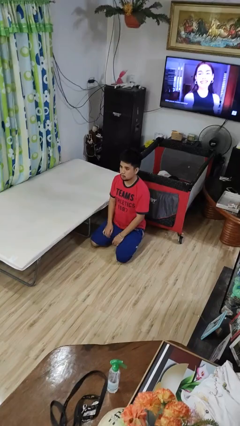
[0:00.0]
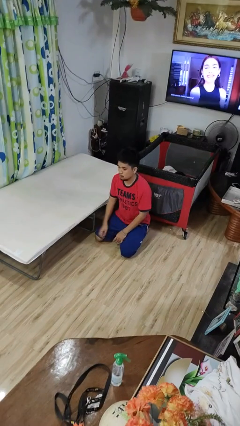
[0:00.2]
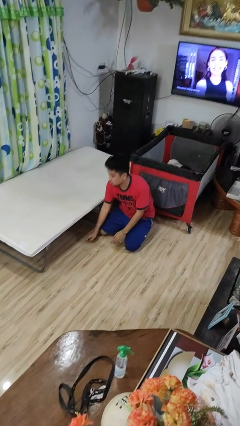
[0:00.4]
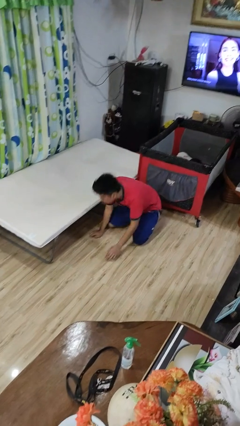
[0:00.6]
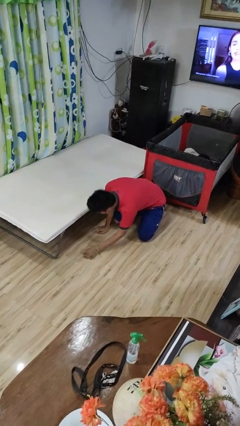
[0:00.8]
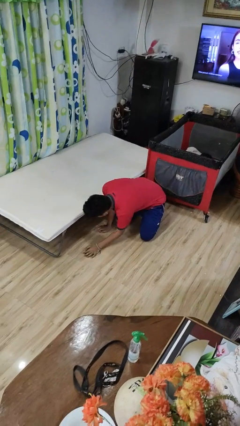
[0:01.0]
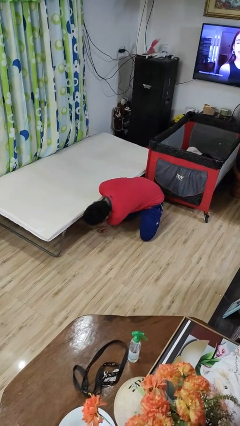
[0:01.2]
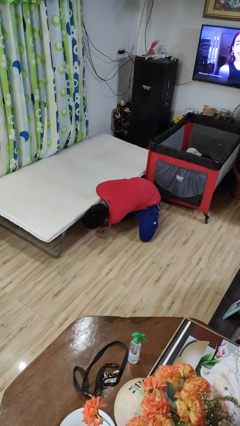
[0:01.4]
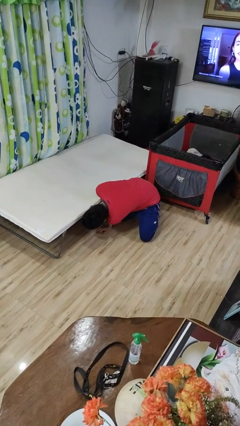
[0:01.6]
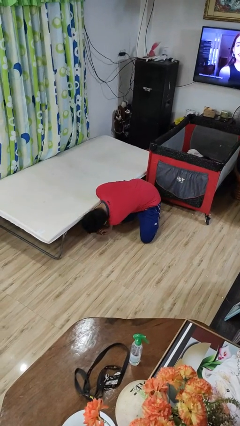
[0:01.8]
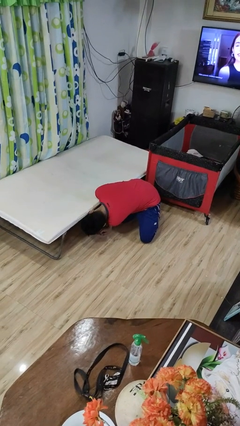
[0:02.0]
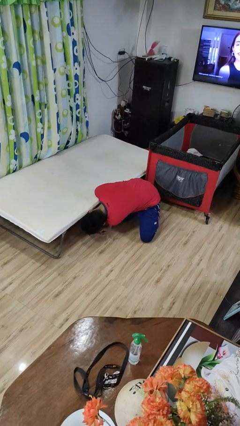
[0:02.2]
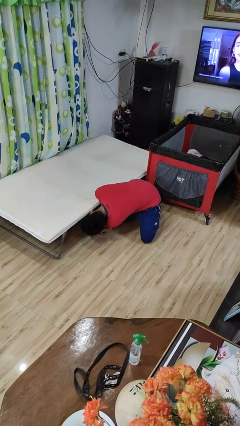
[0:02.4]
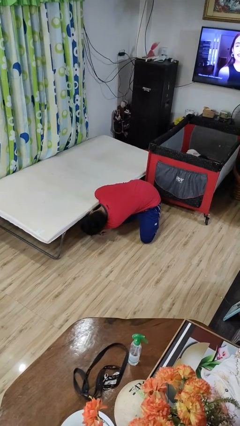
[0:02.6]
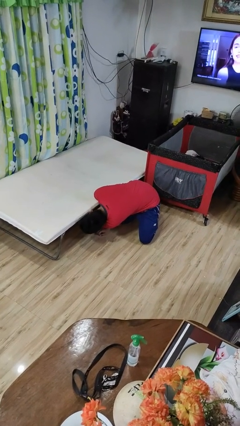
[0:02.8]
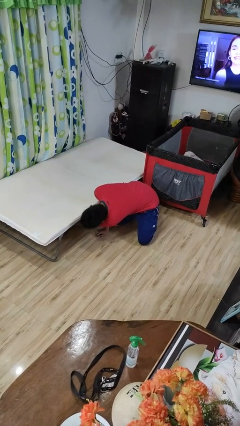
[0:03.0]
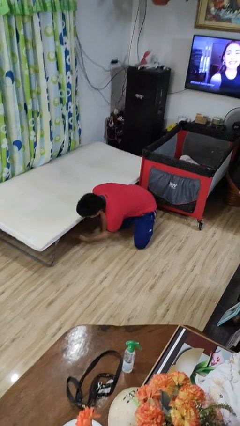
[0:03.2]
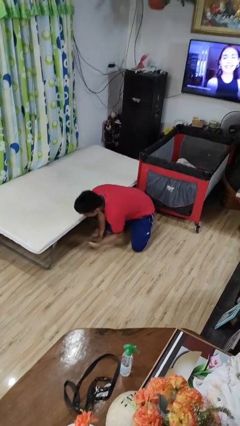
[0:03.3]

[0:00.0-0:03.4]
person searches under bed

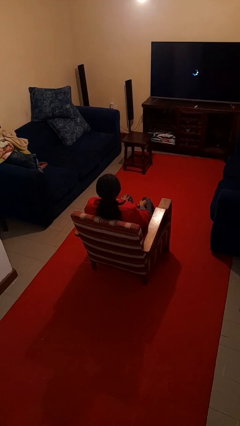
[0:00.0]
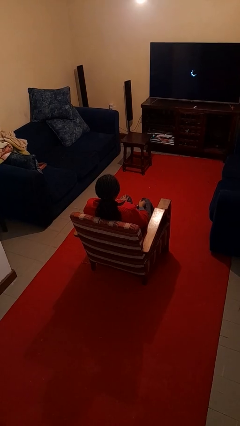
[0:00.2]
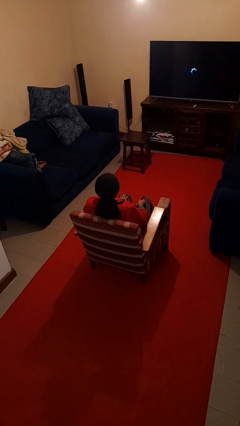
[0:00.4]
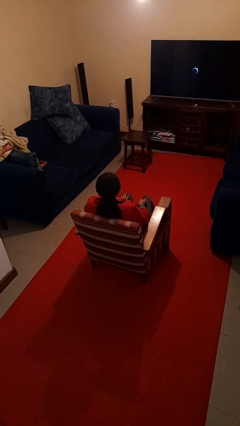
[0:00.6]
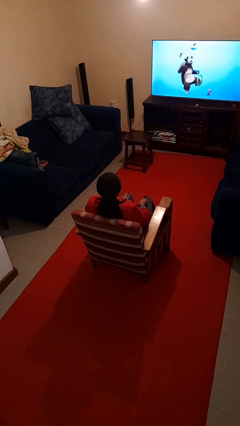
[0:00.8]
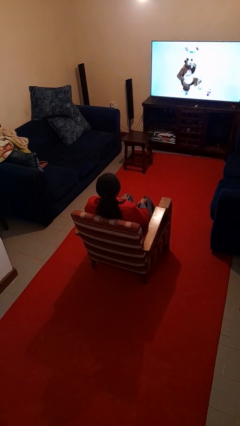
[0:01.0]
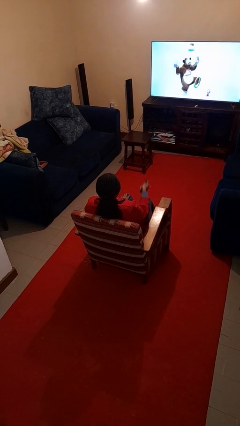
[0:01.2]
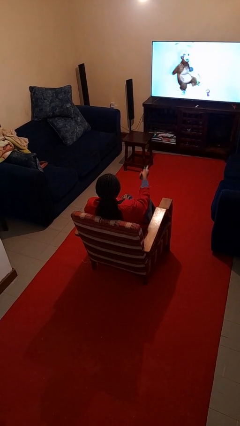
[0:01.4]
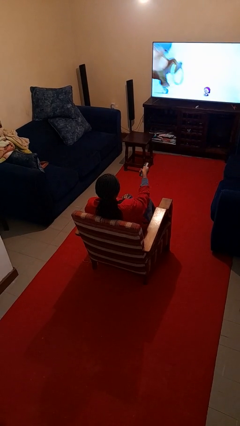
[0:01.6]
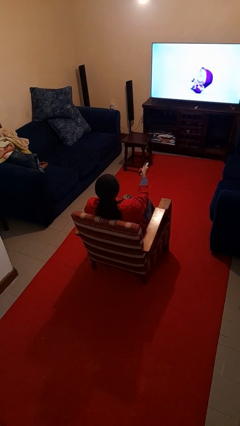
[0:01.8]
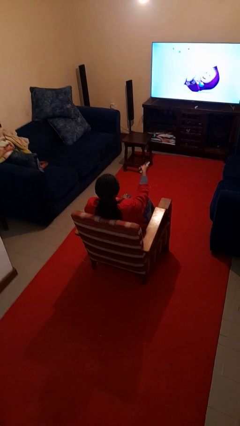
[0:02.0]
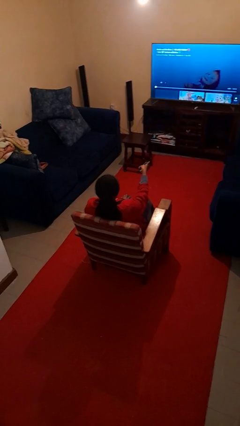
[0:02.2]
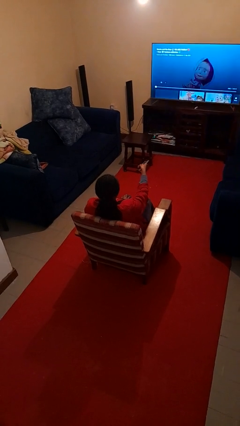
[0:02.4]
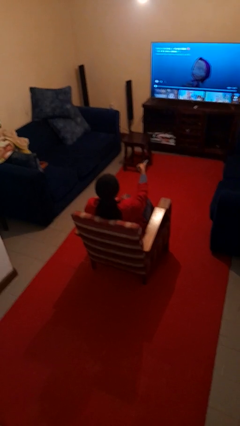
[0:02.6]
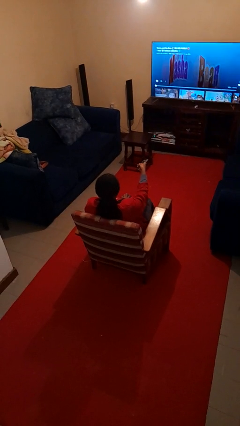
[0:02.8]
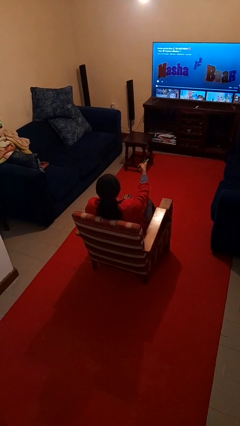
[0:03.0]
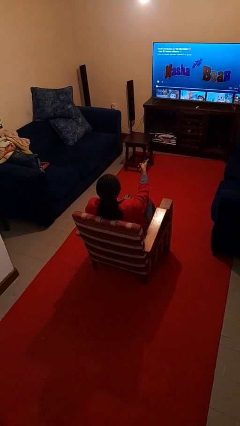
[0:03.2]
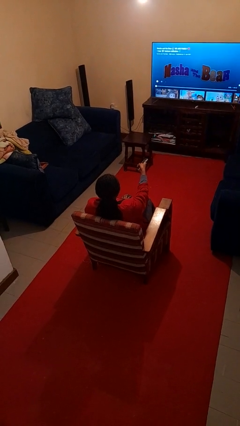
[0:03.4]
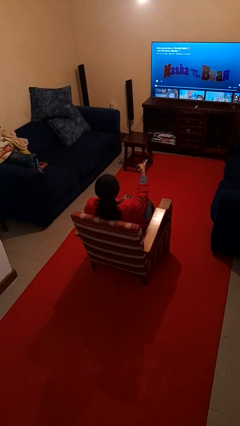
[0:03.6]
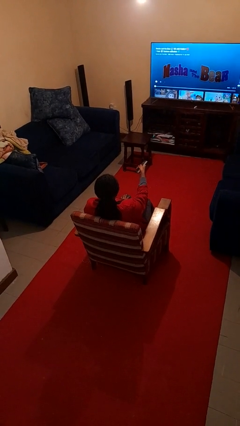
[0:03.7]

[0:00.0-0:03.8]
person uses television remote

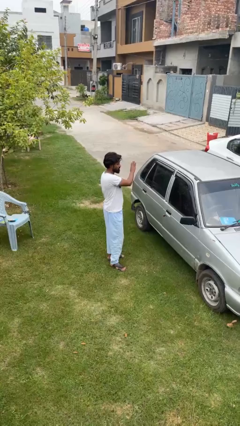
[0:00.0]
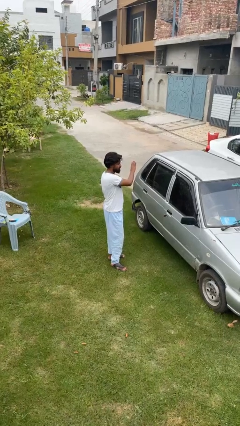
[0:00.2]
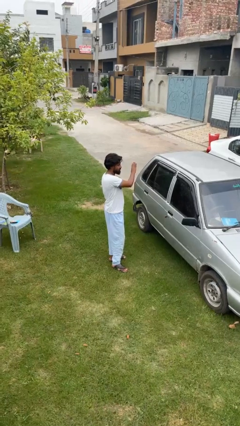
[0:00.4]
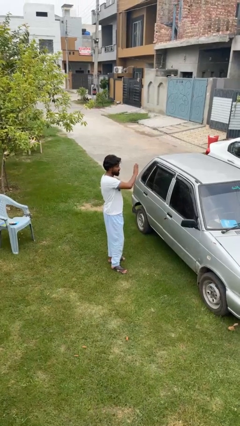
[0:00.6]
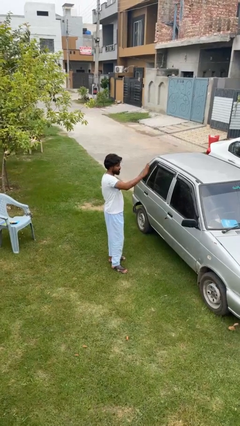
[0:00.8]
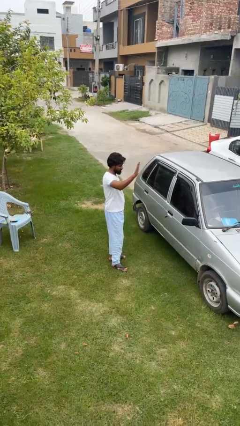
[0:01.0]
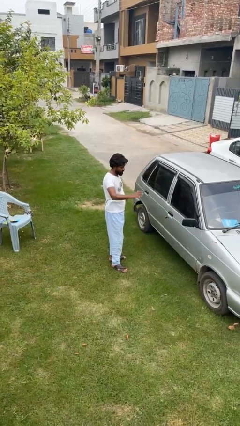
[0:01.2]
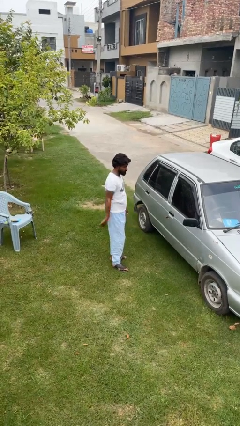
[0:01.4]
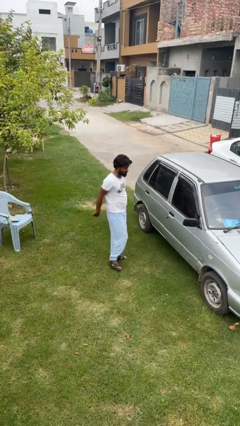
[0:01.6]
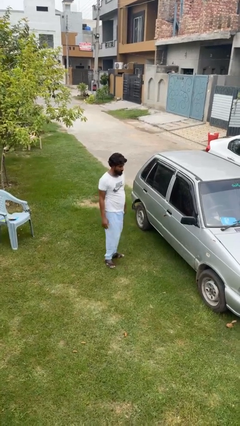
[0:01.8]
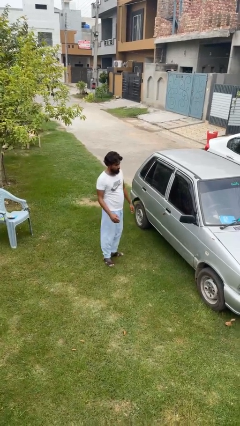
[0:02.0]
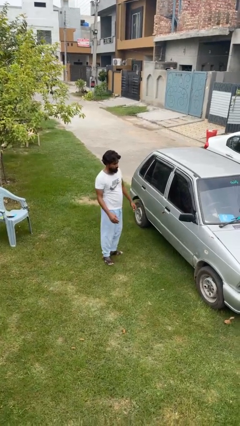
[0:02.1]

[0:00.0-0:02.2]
person gestures swipe right

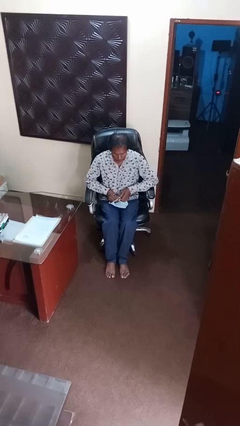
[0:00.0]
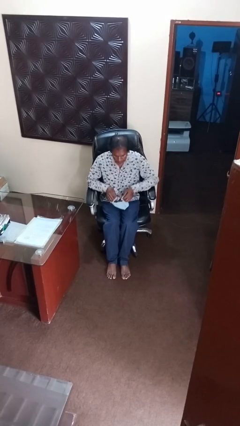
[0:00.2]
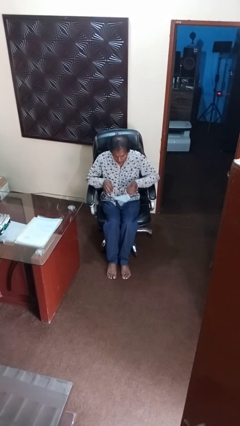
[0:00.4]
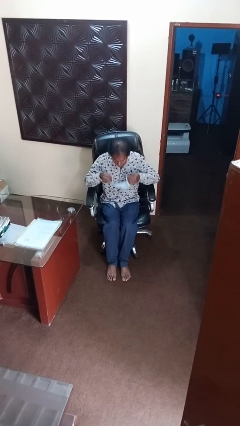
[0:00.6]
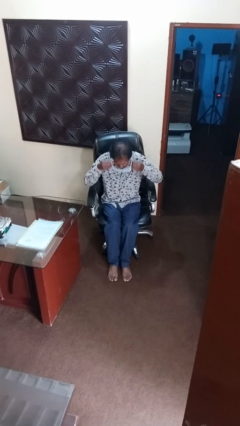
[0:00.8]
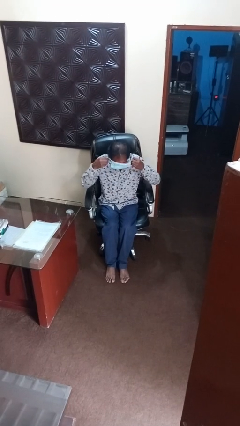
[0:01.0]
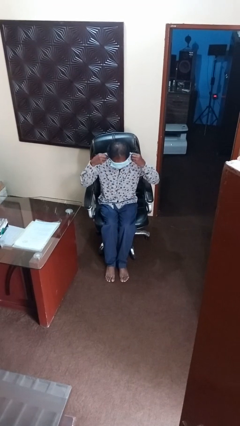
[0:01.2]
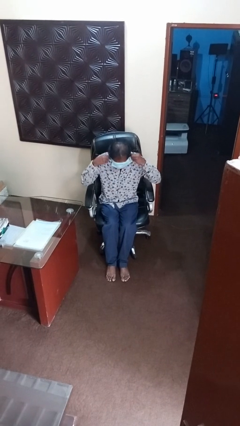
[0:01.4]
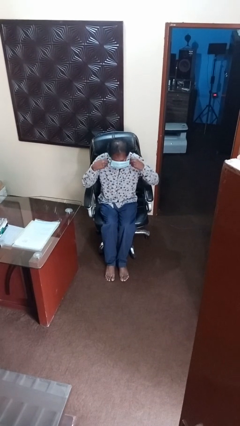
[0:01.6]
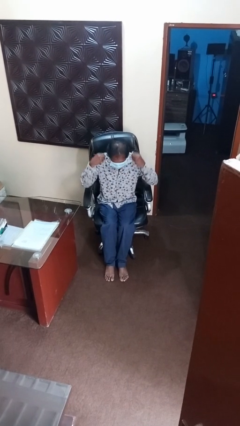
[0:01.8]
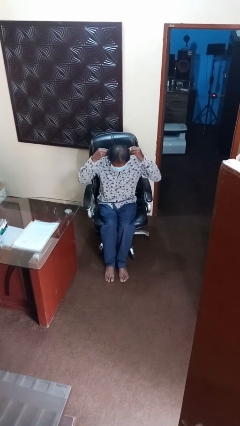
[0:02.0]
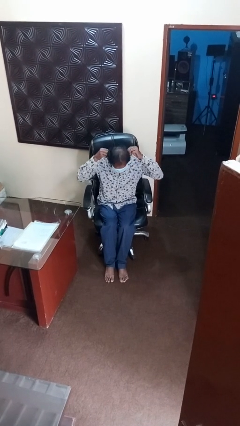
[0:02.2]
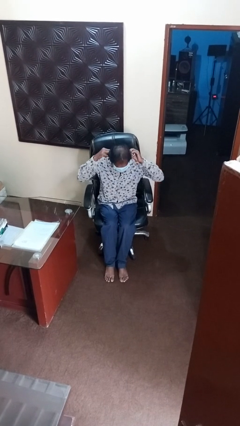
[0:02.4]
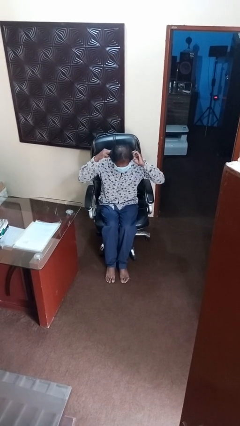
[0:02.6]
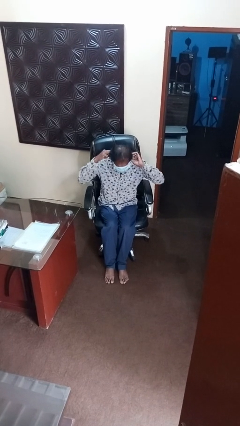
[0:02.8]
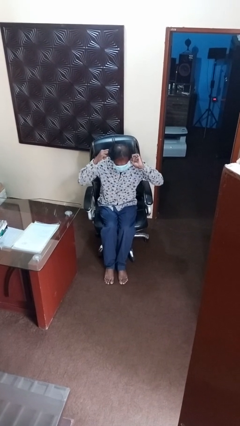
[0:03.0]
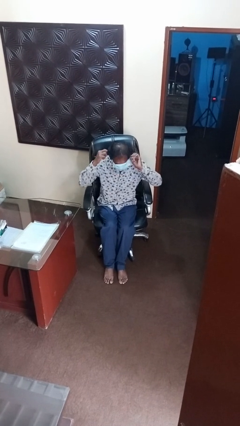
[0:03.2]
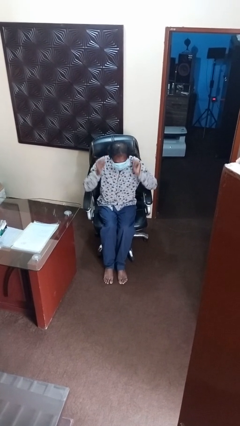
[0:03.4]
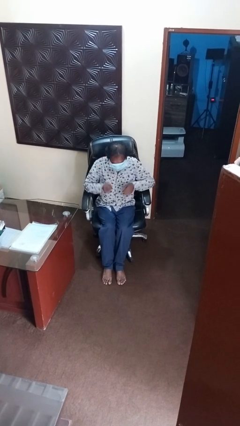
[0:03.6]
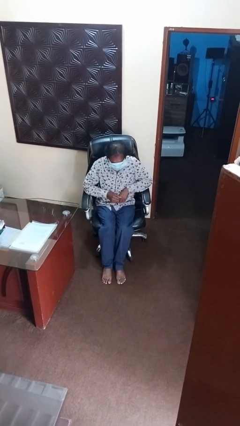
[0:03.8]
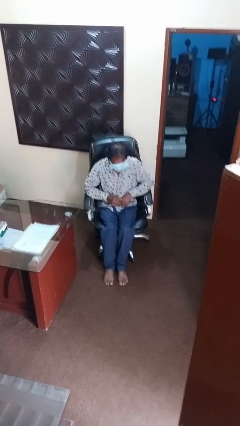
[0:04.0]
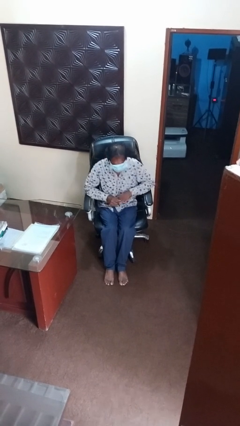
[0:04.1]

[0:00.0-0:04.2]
person puts on facemask

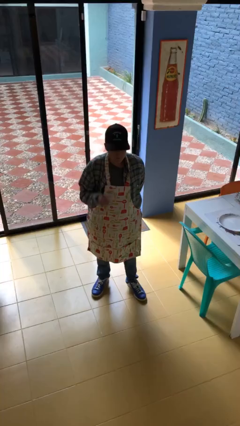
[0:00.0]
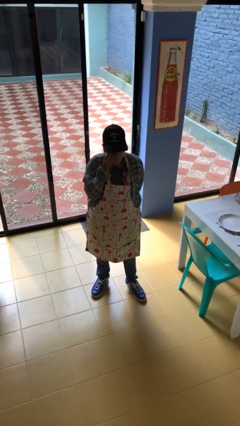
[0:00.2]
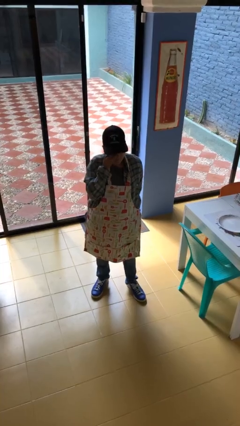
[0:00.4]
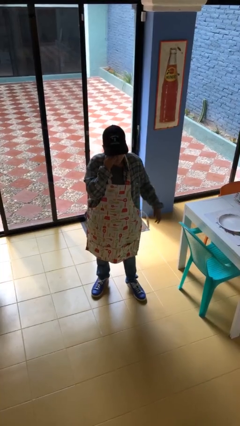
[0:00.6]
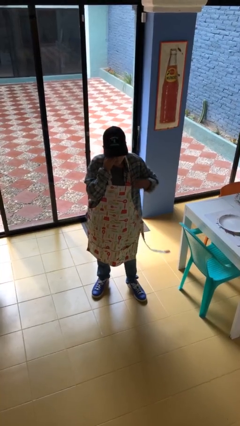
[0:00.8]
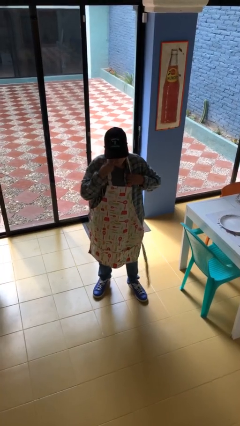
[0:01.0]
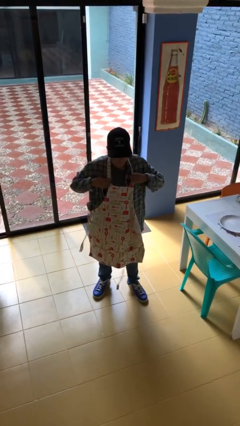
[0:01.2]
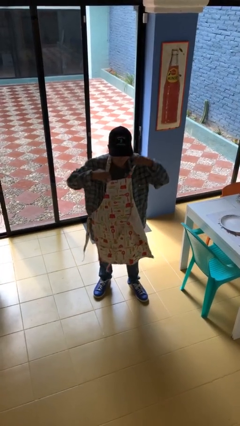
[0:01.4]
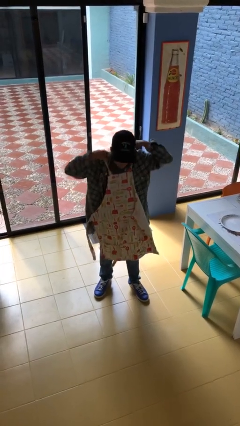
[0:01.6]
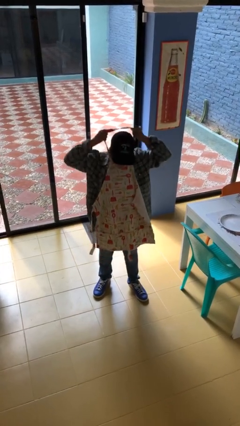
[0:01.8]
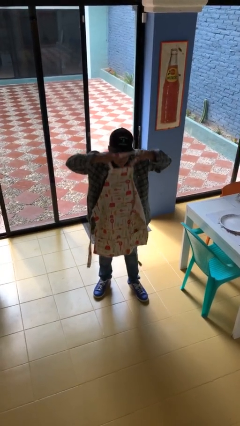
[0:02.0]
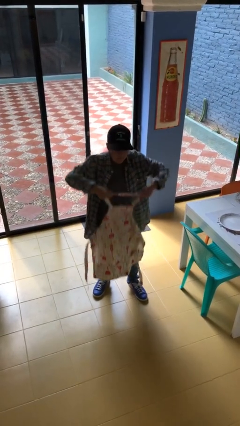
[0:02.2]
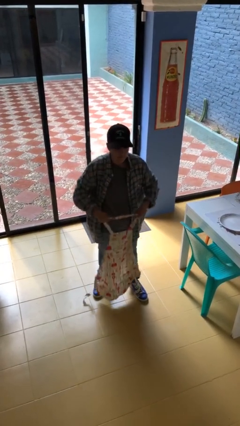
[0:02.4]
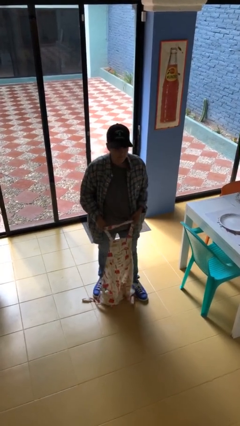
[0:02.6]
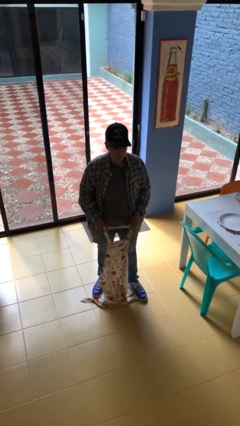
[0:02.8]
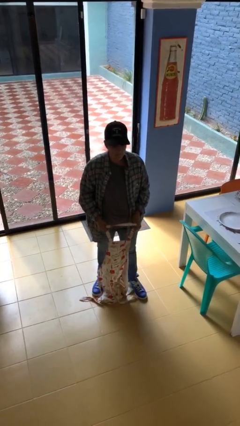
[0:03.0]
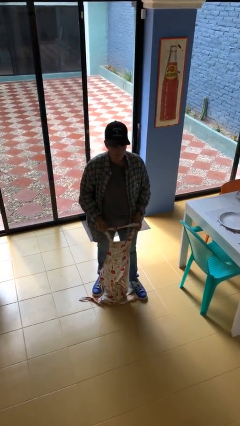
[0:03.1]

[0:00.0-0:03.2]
person takes off apron

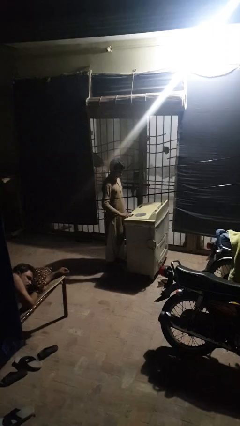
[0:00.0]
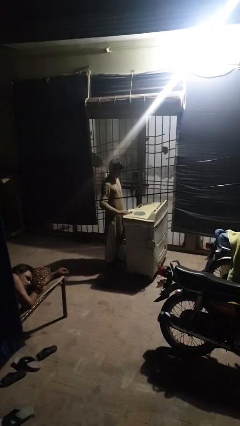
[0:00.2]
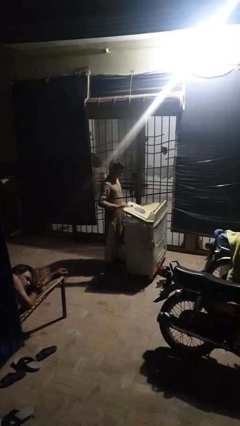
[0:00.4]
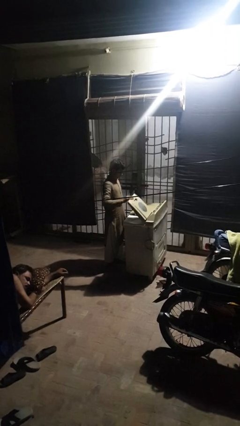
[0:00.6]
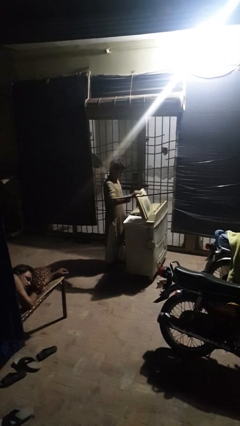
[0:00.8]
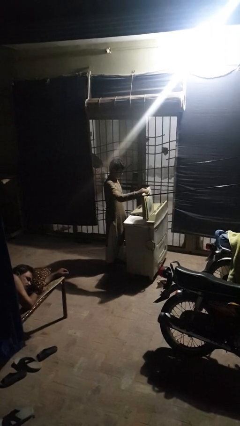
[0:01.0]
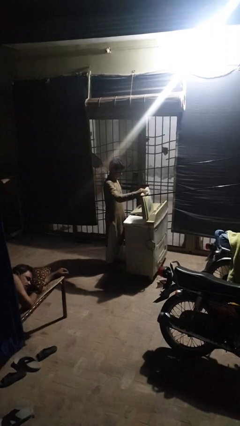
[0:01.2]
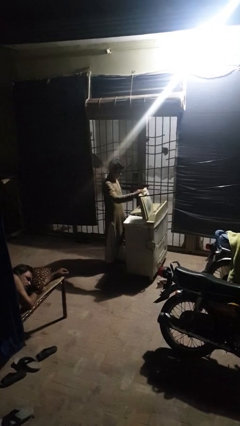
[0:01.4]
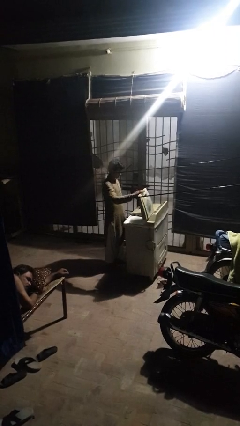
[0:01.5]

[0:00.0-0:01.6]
person opens clothes washer
